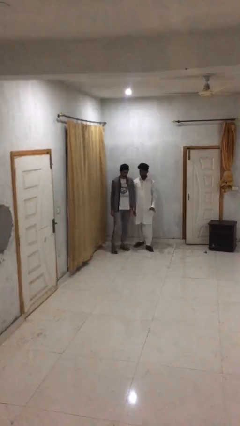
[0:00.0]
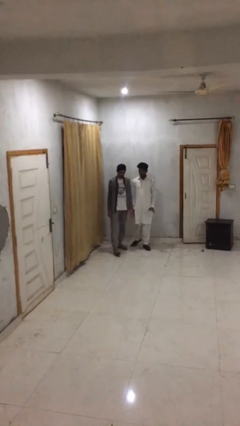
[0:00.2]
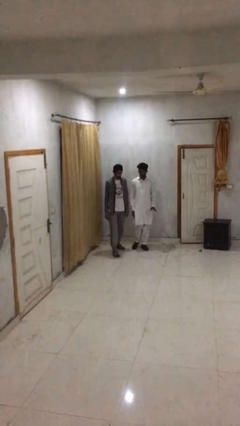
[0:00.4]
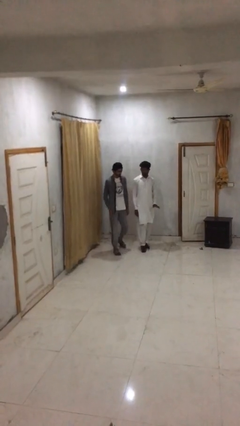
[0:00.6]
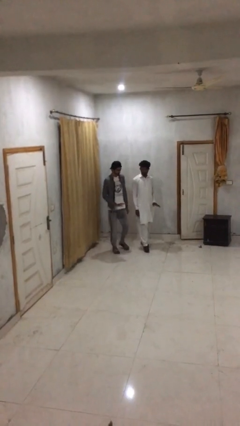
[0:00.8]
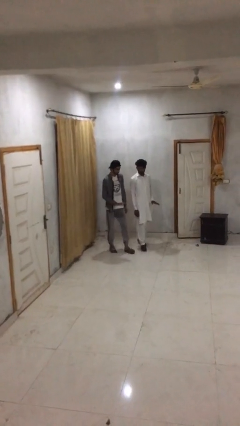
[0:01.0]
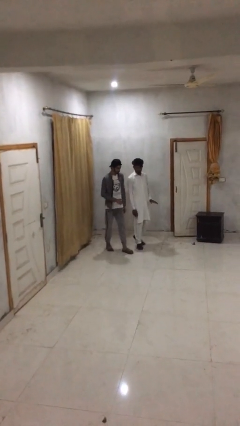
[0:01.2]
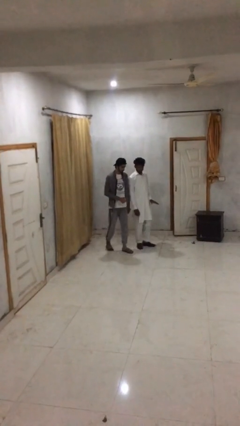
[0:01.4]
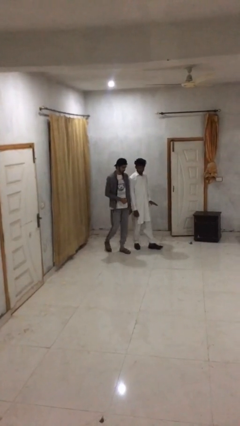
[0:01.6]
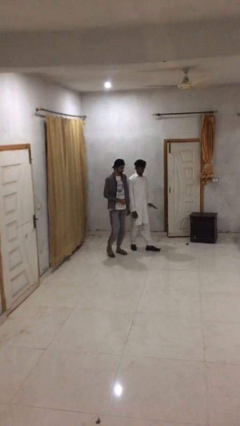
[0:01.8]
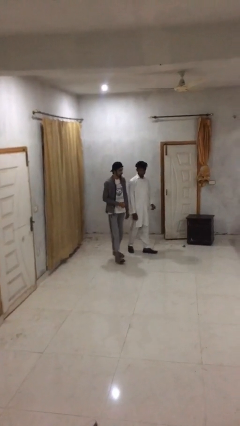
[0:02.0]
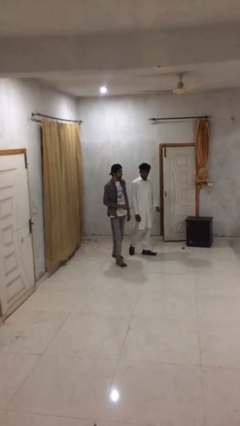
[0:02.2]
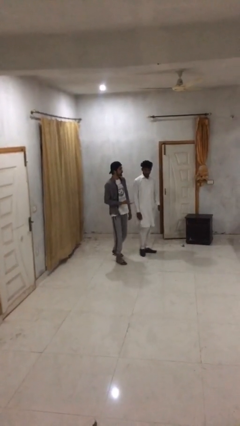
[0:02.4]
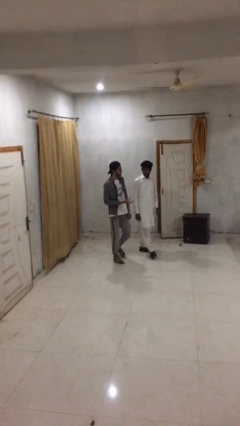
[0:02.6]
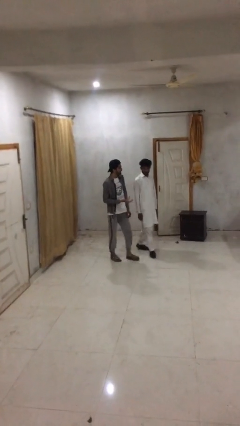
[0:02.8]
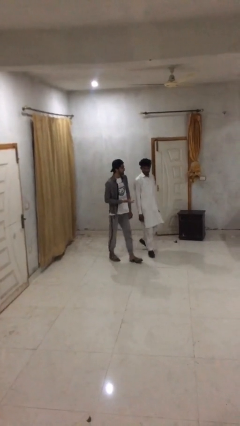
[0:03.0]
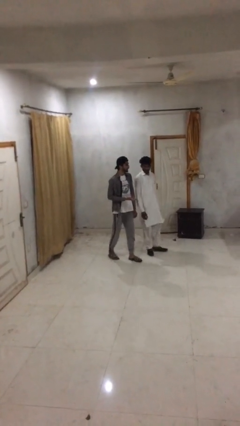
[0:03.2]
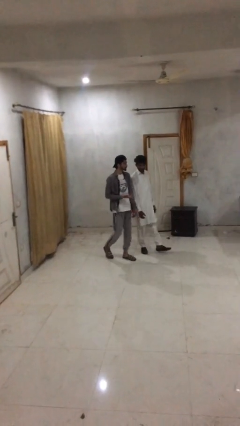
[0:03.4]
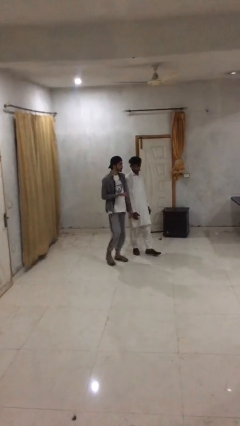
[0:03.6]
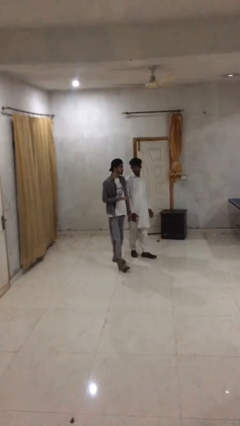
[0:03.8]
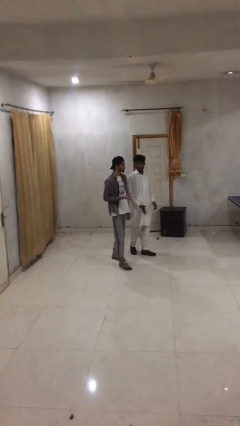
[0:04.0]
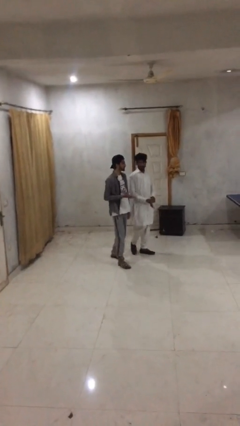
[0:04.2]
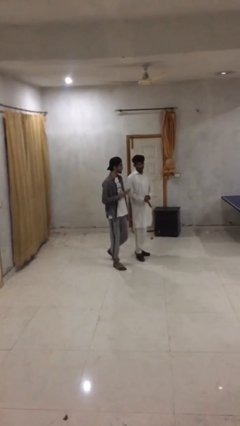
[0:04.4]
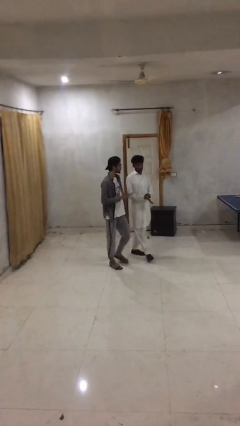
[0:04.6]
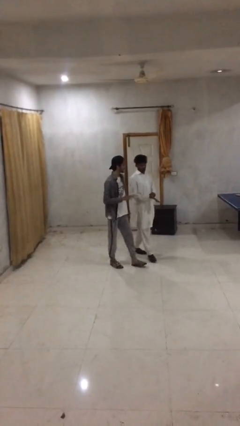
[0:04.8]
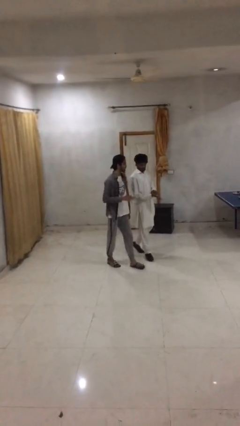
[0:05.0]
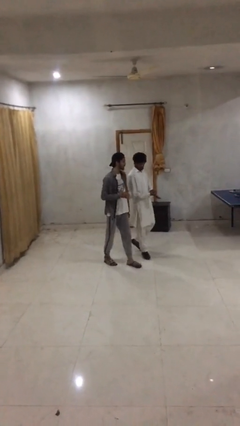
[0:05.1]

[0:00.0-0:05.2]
person talks to person

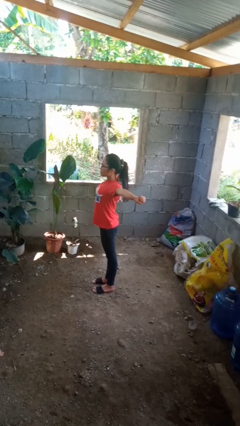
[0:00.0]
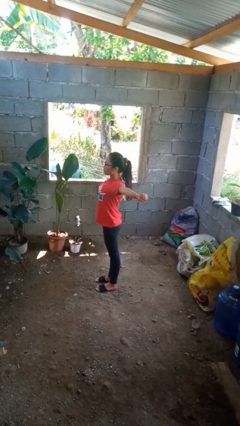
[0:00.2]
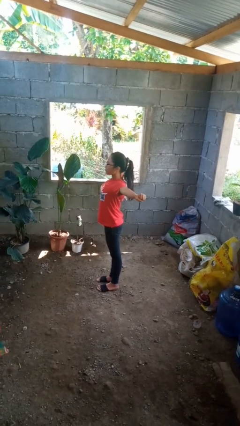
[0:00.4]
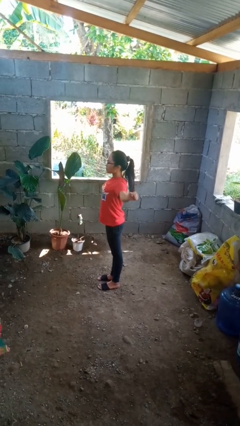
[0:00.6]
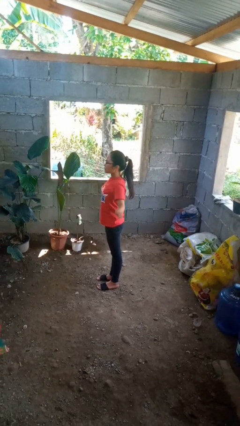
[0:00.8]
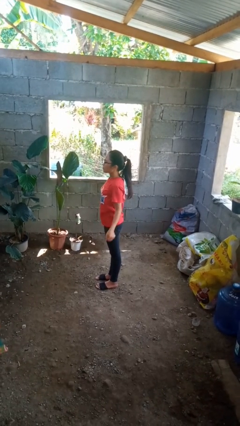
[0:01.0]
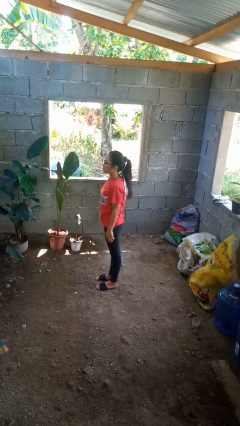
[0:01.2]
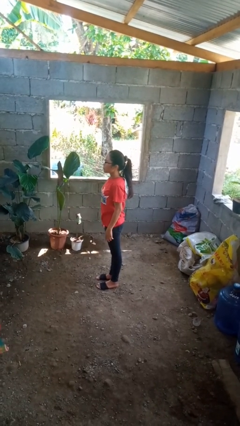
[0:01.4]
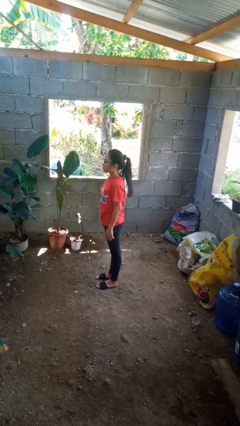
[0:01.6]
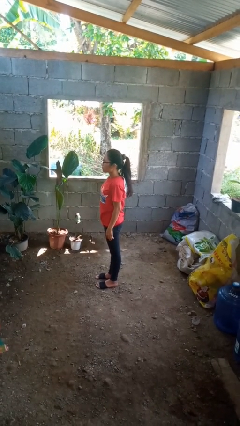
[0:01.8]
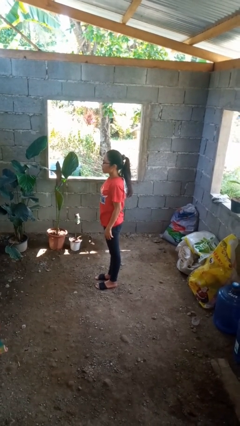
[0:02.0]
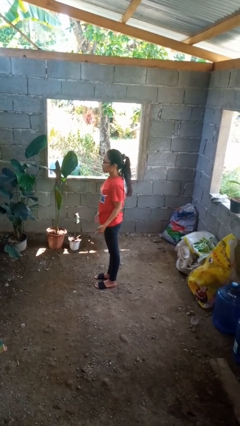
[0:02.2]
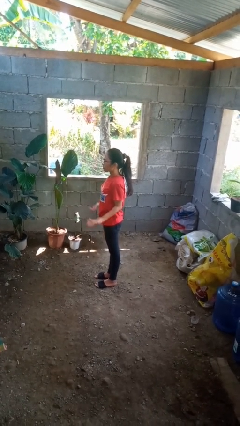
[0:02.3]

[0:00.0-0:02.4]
person stretches arms to side

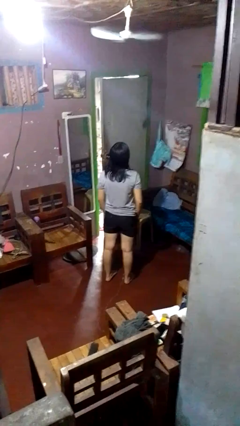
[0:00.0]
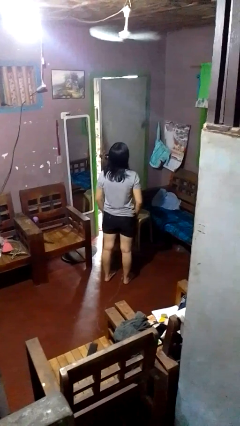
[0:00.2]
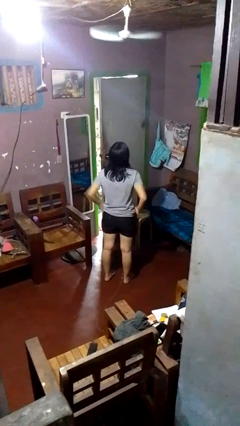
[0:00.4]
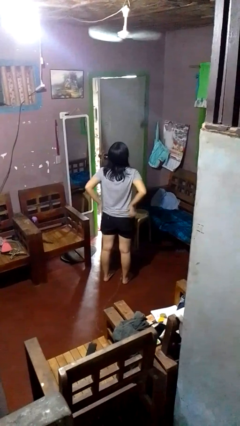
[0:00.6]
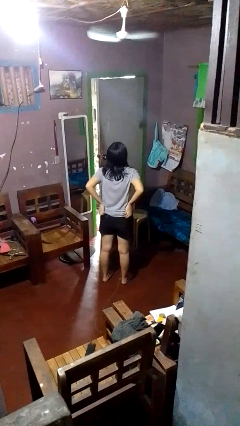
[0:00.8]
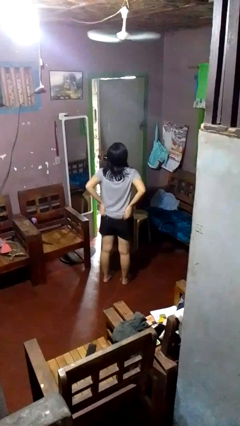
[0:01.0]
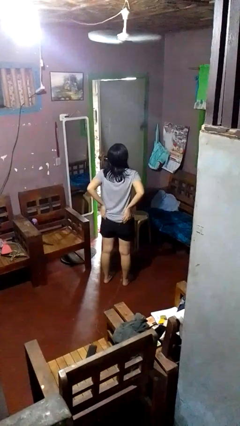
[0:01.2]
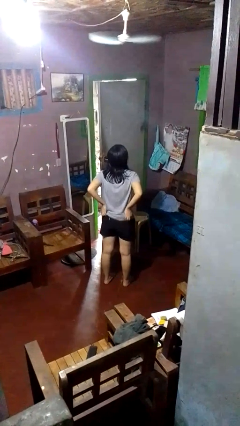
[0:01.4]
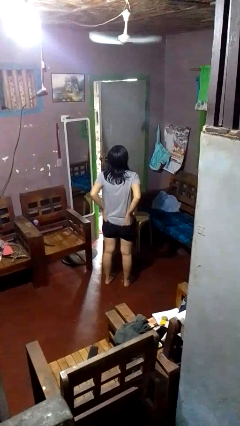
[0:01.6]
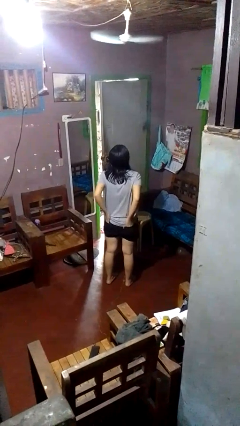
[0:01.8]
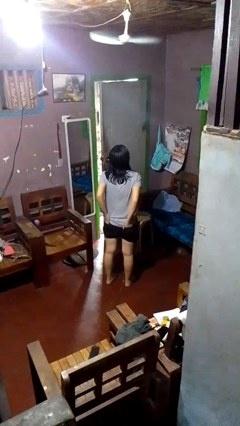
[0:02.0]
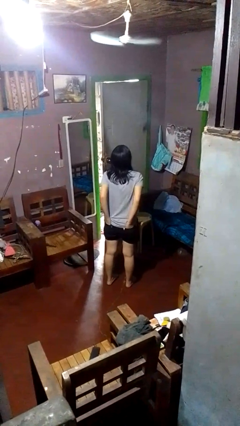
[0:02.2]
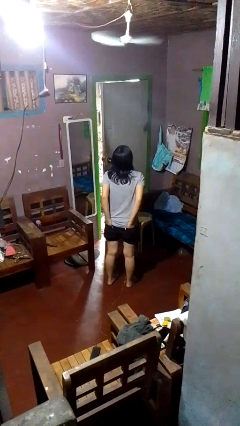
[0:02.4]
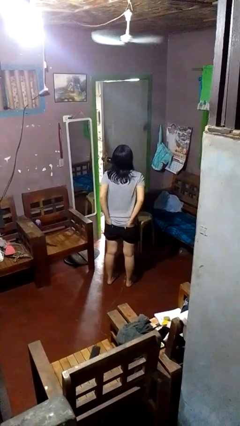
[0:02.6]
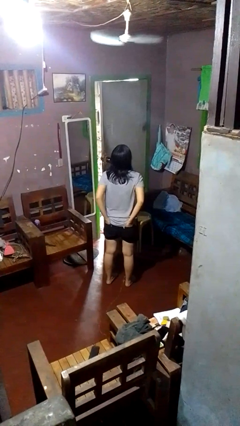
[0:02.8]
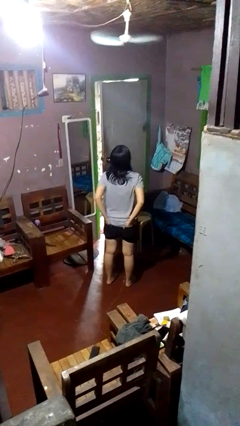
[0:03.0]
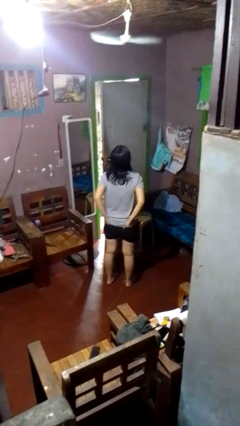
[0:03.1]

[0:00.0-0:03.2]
person puts hands in back pockets

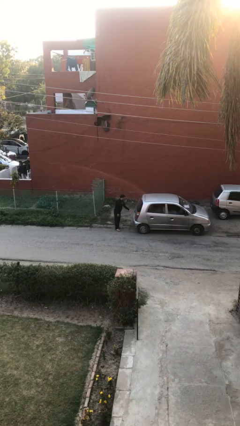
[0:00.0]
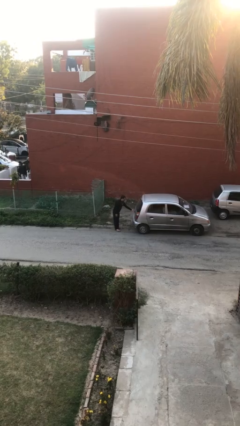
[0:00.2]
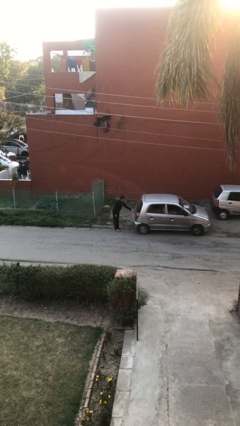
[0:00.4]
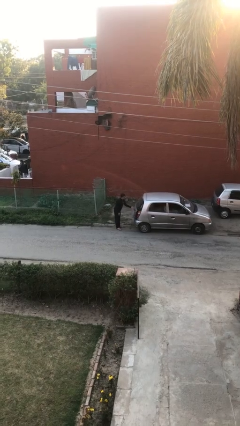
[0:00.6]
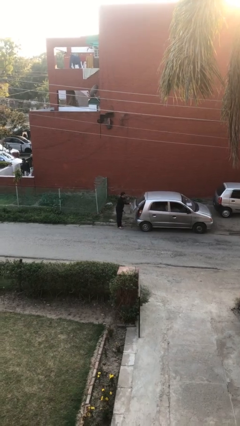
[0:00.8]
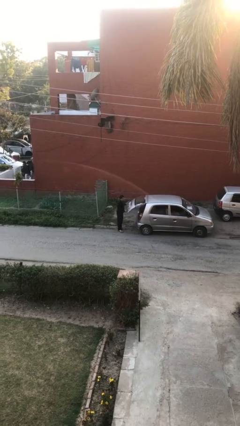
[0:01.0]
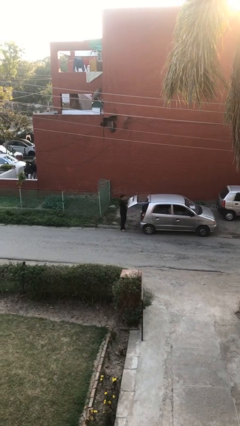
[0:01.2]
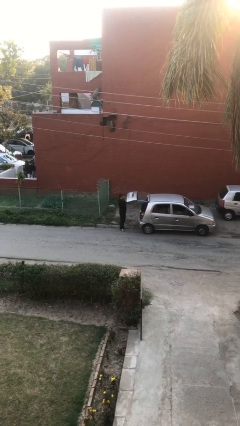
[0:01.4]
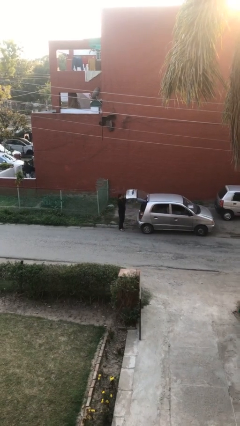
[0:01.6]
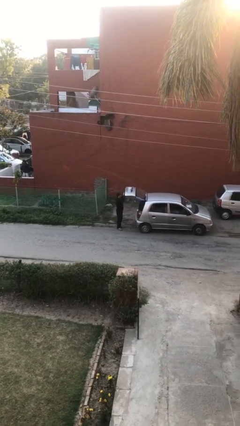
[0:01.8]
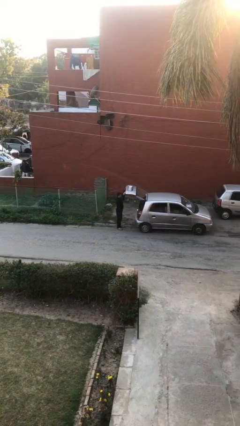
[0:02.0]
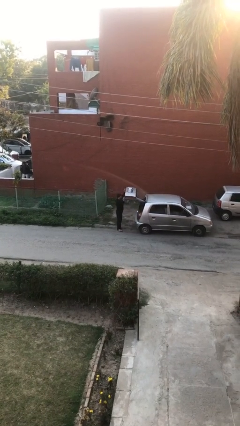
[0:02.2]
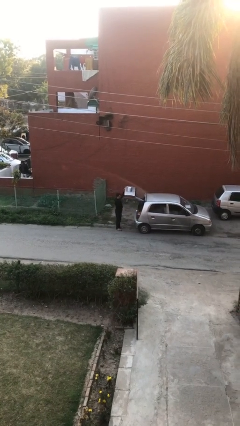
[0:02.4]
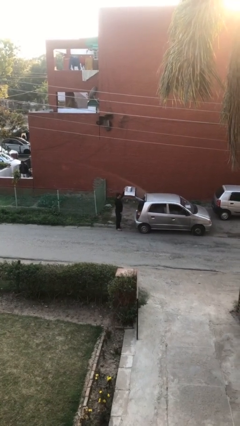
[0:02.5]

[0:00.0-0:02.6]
person opens car trunk

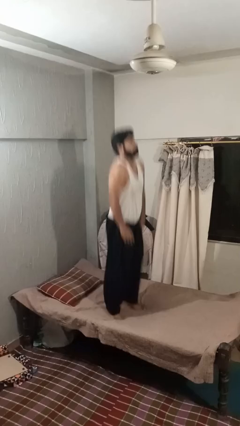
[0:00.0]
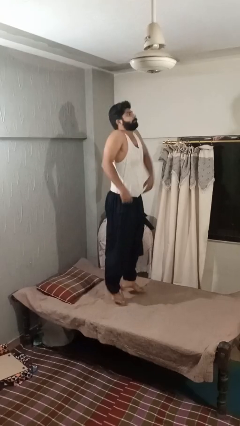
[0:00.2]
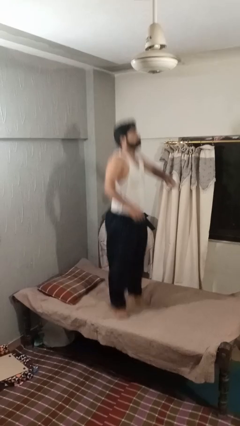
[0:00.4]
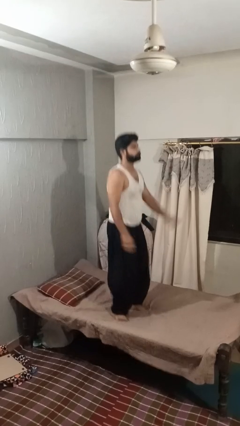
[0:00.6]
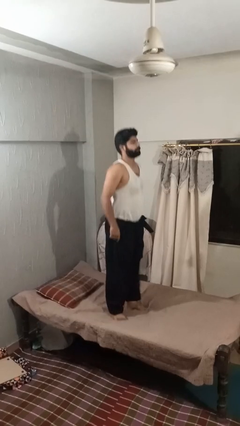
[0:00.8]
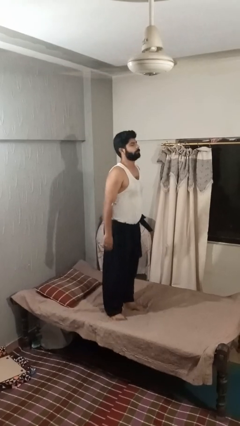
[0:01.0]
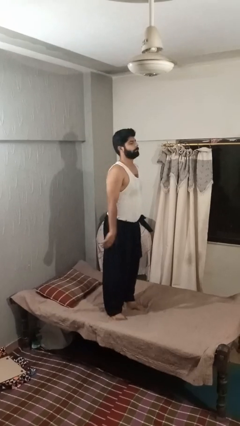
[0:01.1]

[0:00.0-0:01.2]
person jumps on bed

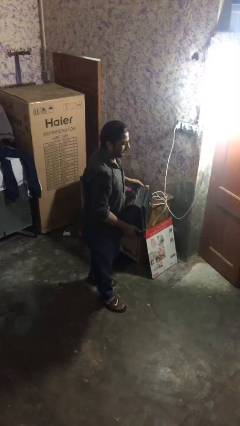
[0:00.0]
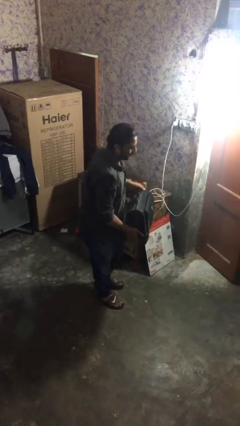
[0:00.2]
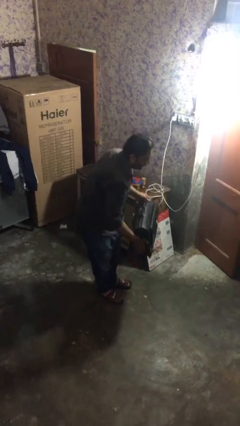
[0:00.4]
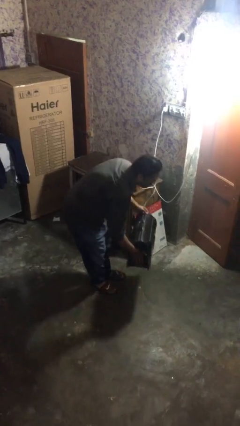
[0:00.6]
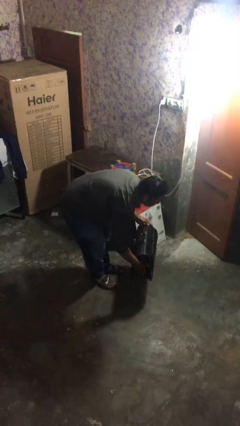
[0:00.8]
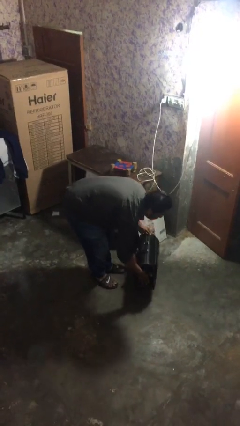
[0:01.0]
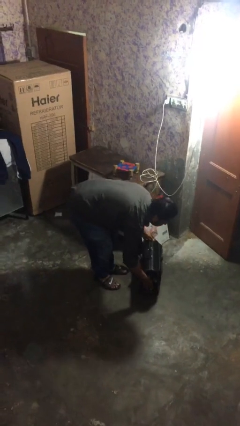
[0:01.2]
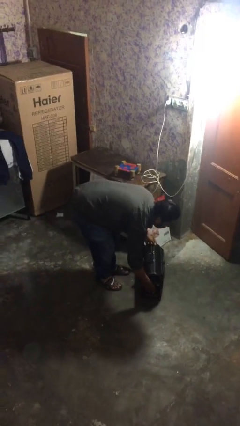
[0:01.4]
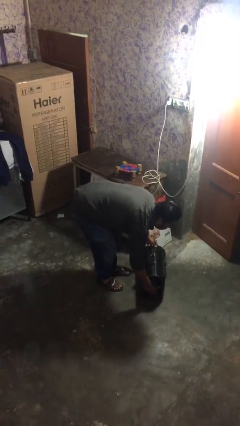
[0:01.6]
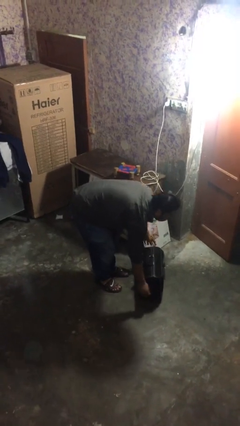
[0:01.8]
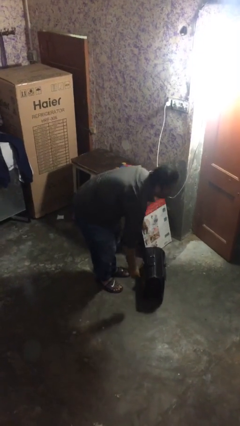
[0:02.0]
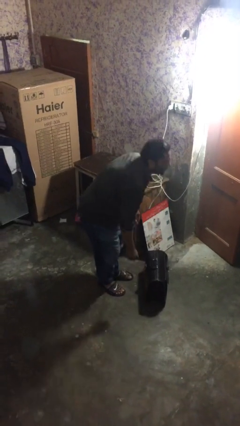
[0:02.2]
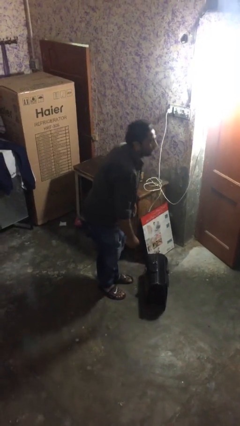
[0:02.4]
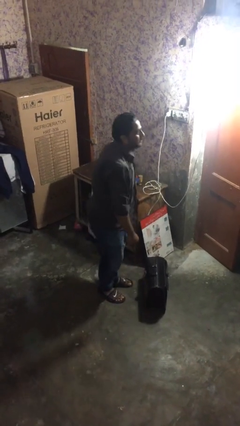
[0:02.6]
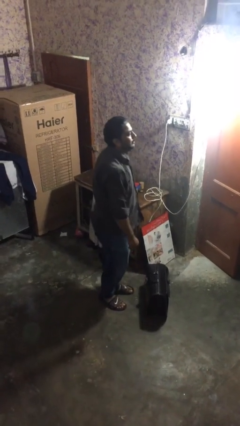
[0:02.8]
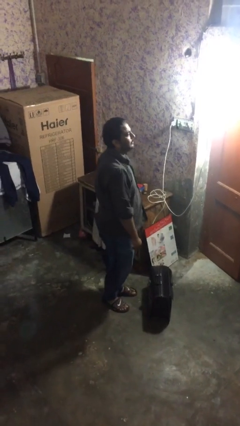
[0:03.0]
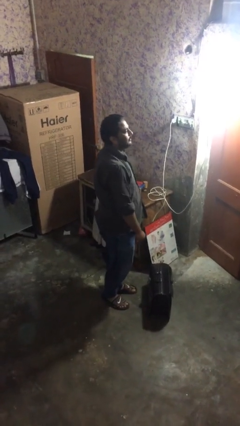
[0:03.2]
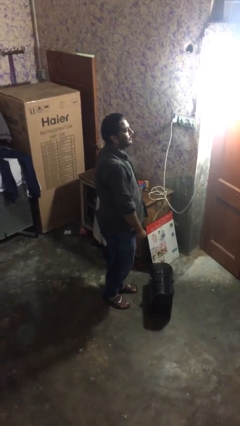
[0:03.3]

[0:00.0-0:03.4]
person puts down object on floor
